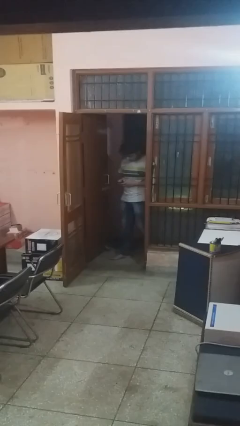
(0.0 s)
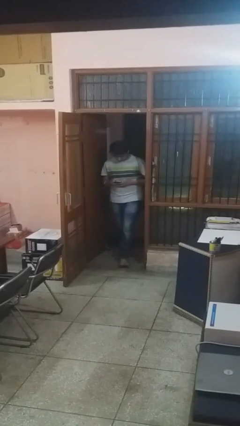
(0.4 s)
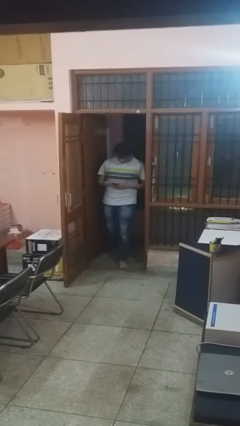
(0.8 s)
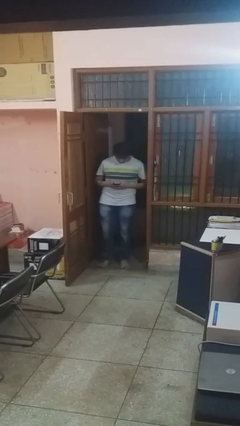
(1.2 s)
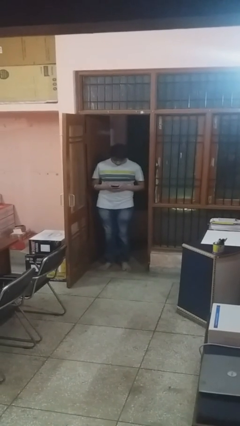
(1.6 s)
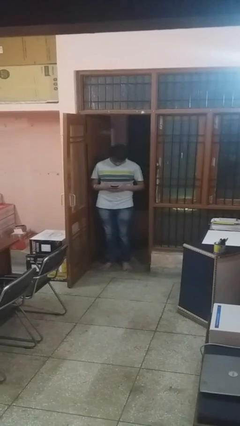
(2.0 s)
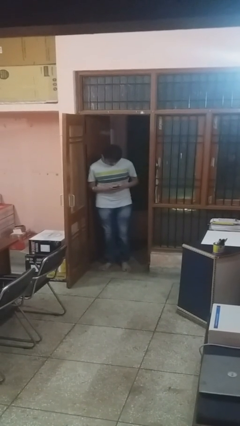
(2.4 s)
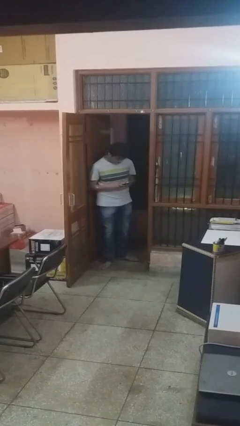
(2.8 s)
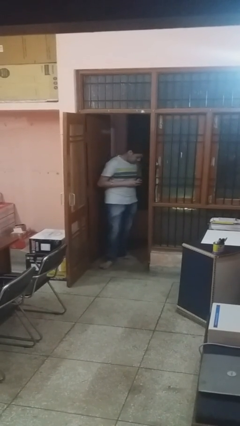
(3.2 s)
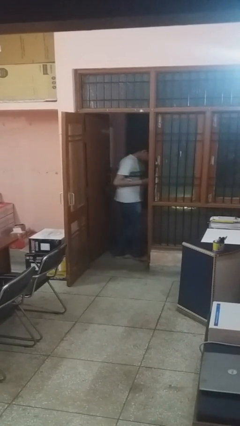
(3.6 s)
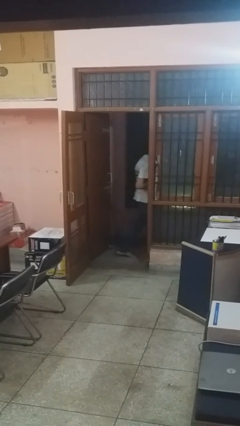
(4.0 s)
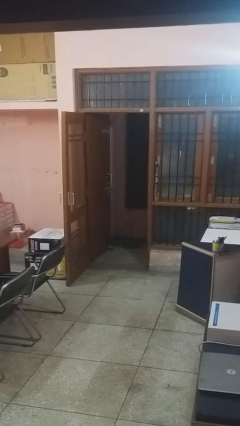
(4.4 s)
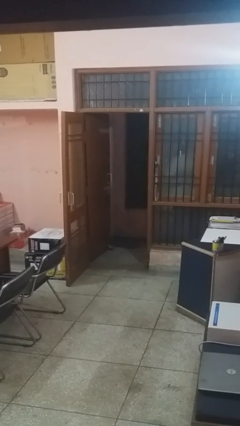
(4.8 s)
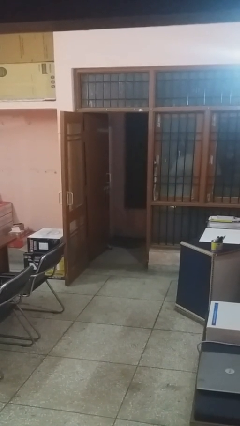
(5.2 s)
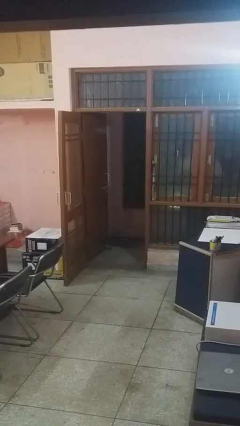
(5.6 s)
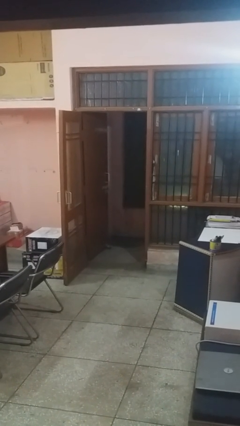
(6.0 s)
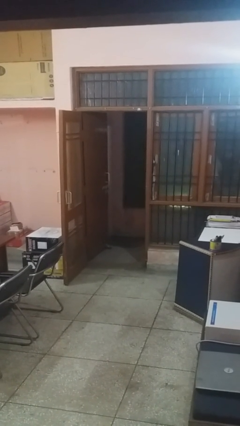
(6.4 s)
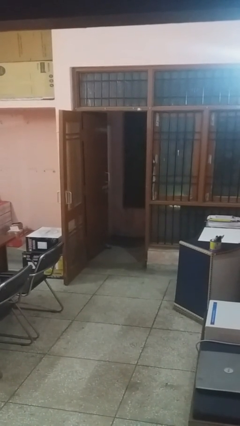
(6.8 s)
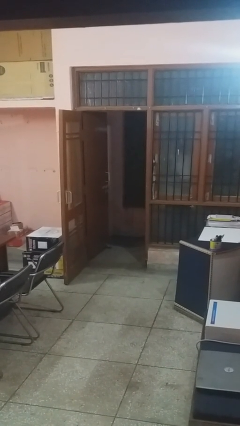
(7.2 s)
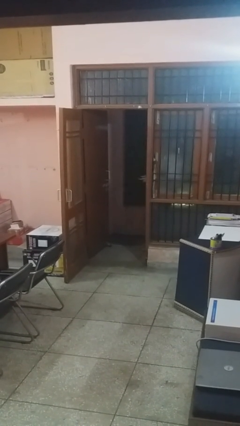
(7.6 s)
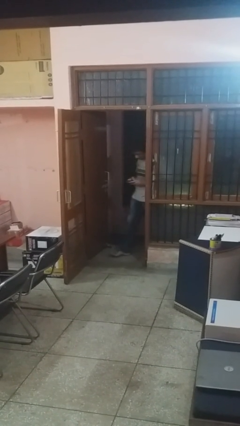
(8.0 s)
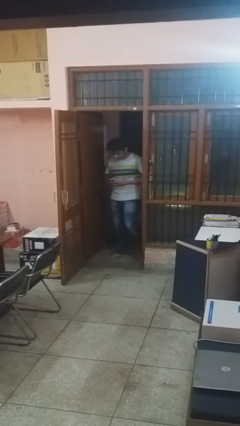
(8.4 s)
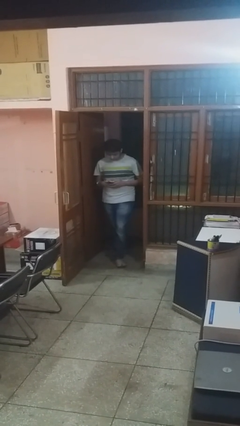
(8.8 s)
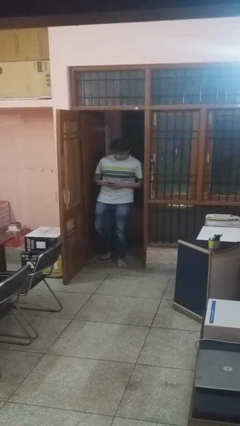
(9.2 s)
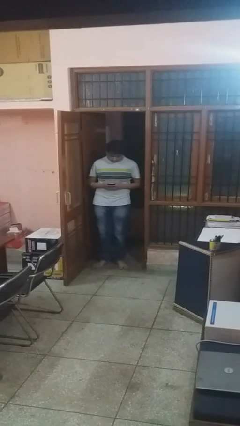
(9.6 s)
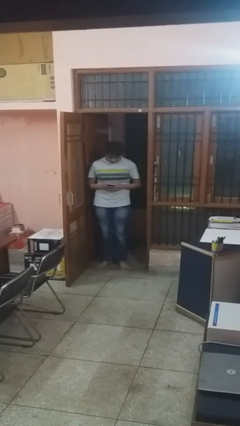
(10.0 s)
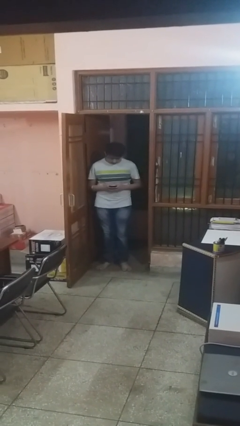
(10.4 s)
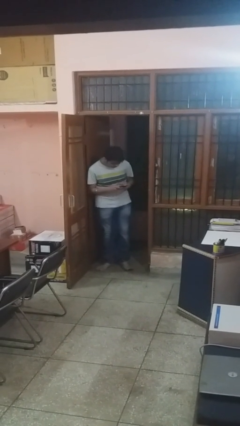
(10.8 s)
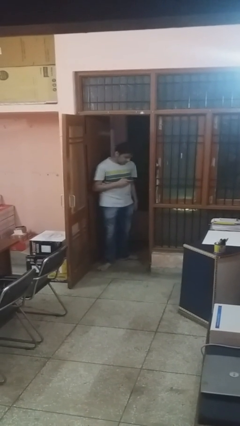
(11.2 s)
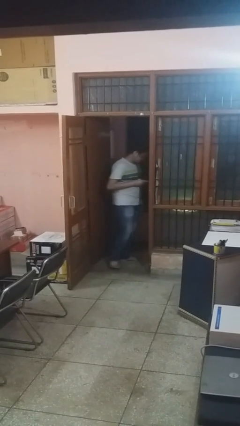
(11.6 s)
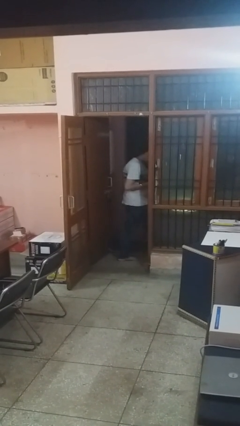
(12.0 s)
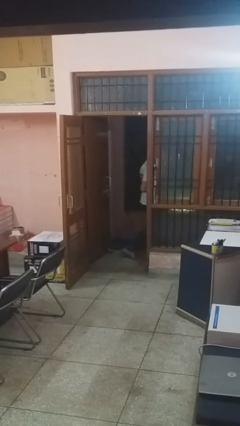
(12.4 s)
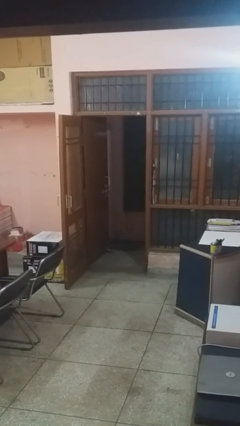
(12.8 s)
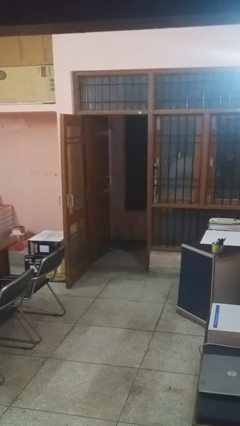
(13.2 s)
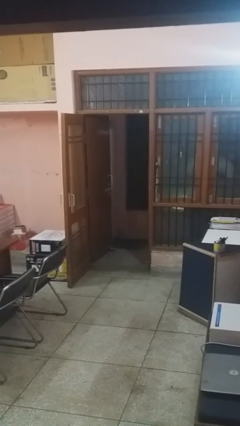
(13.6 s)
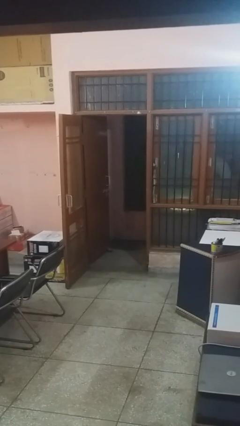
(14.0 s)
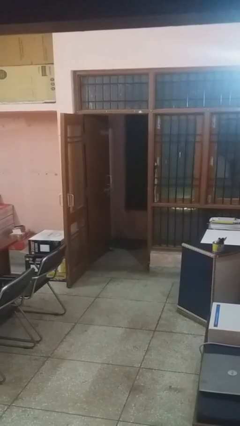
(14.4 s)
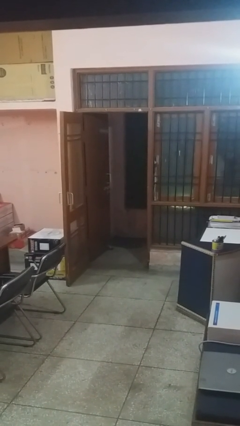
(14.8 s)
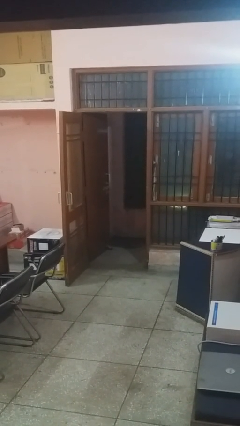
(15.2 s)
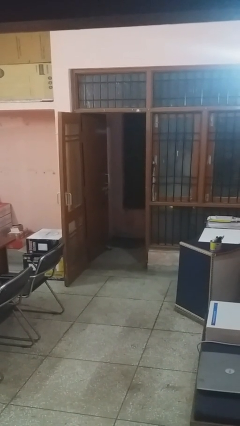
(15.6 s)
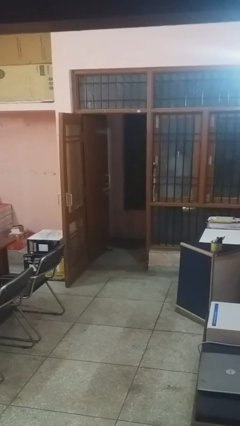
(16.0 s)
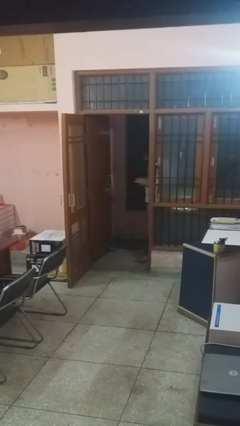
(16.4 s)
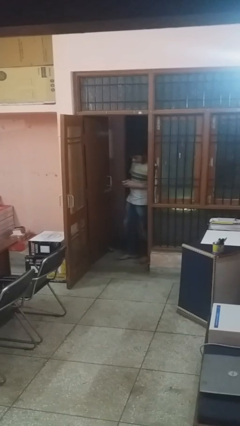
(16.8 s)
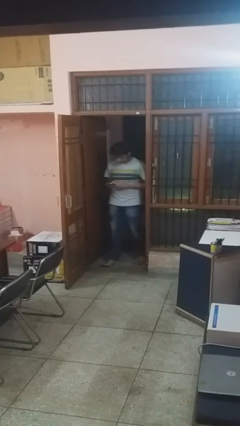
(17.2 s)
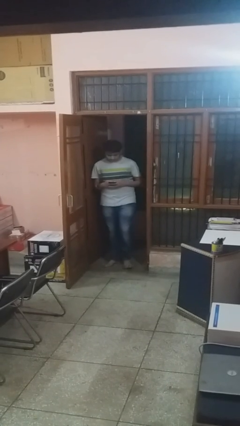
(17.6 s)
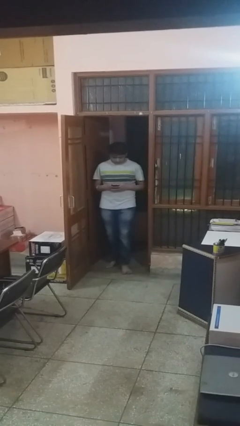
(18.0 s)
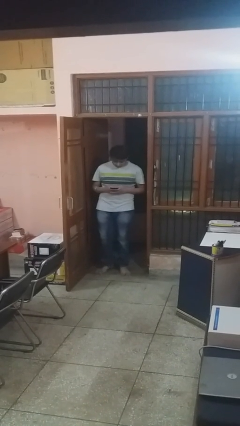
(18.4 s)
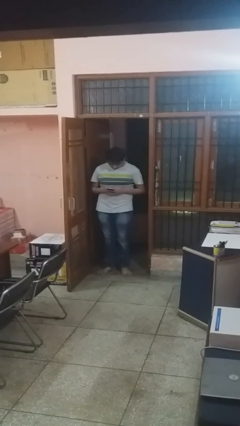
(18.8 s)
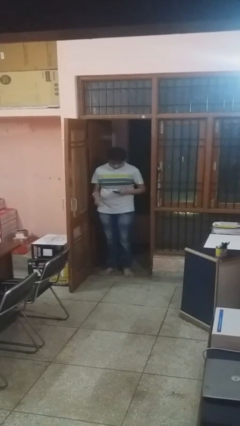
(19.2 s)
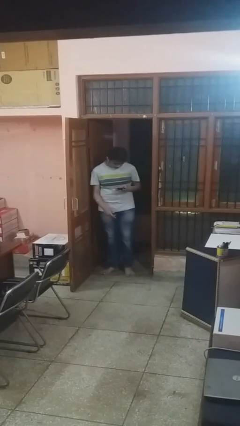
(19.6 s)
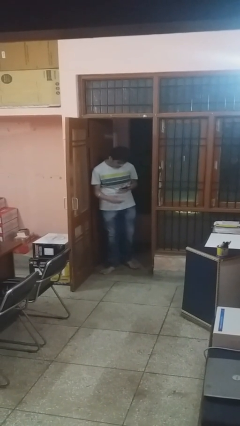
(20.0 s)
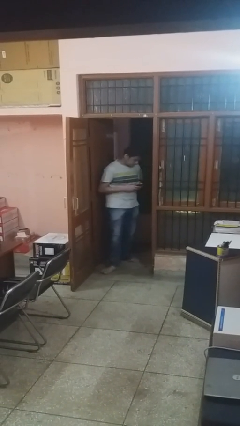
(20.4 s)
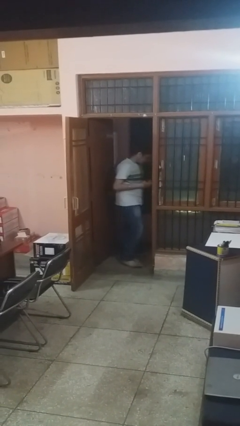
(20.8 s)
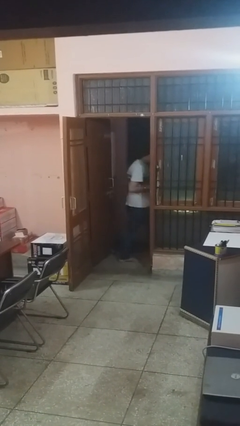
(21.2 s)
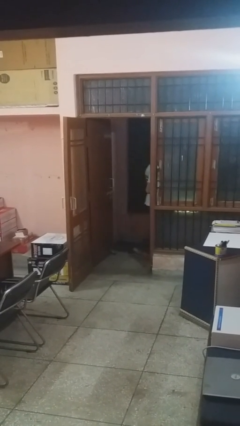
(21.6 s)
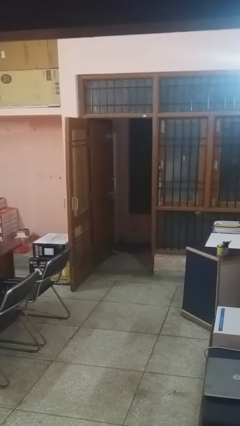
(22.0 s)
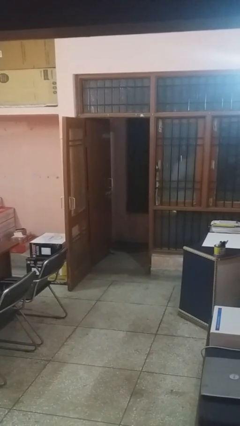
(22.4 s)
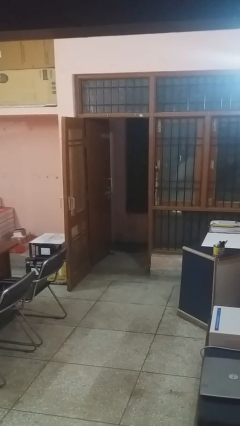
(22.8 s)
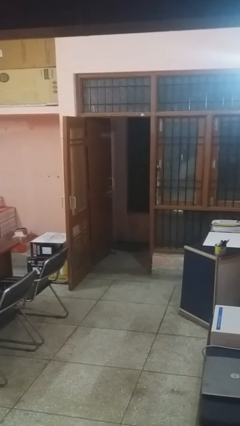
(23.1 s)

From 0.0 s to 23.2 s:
person texts on phone

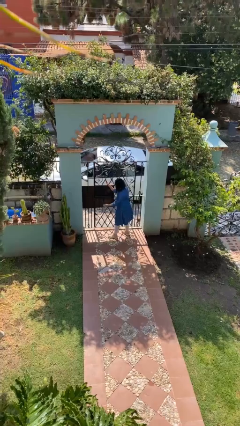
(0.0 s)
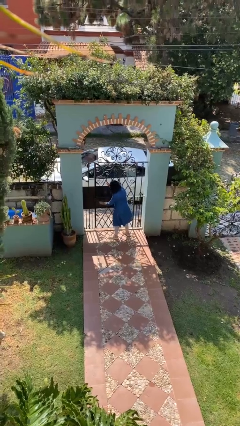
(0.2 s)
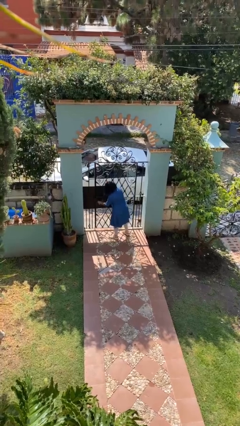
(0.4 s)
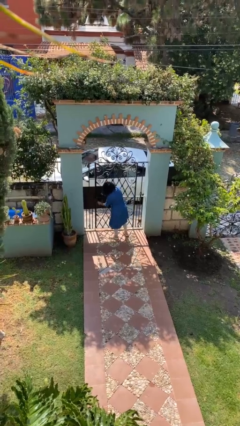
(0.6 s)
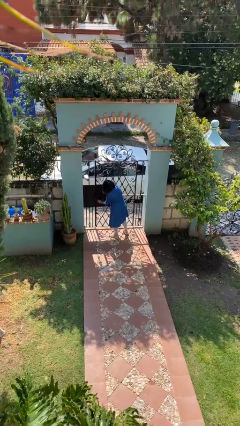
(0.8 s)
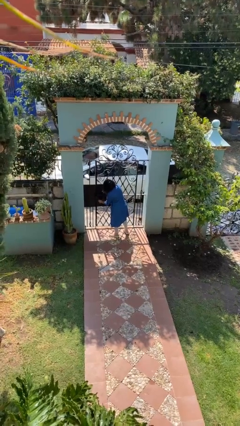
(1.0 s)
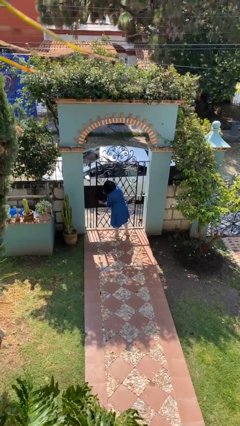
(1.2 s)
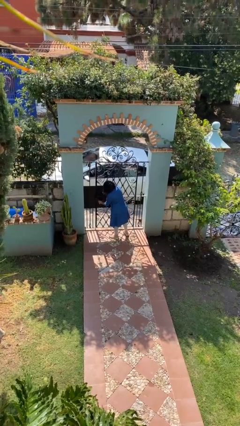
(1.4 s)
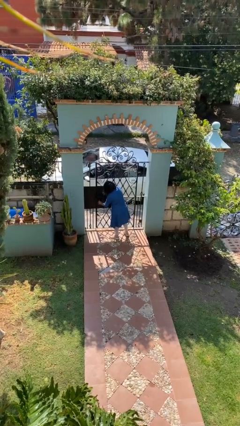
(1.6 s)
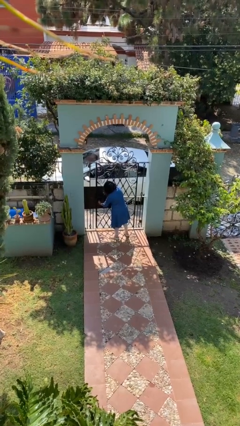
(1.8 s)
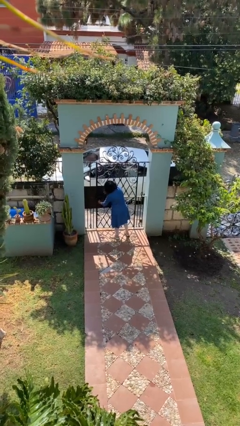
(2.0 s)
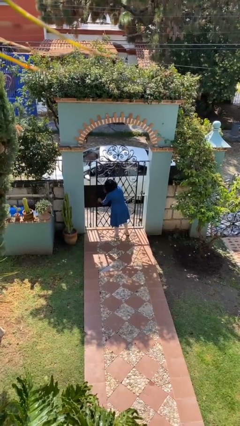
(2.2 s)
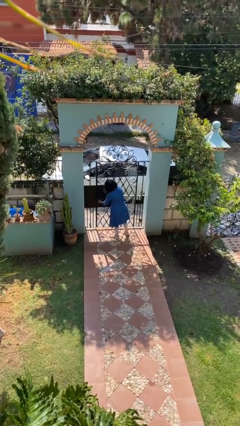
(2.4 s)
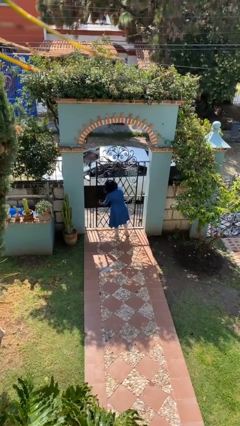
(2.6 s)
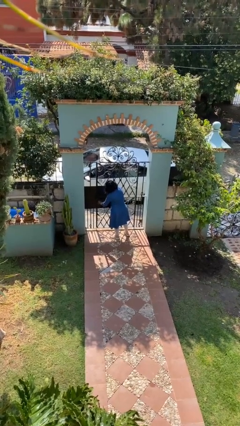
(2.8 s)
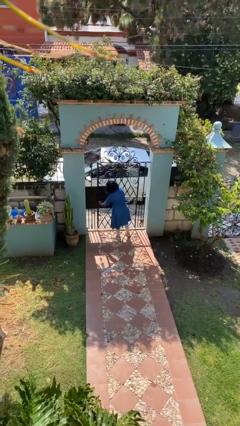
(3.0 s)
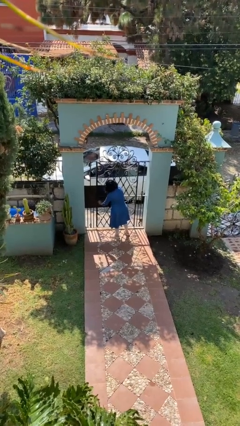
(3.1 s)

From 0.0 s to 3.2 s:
person unlocks door with keys

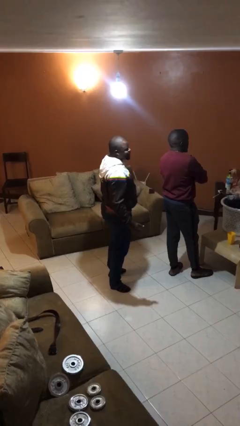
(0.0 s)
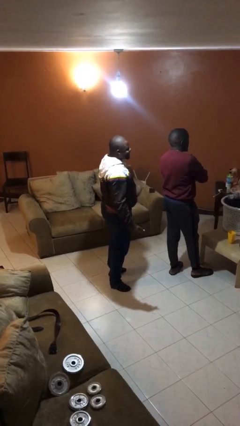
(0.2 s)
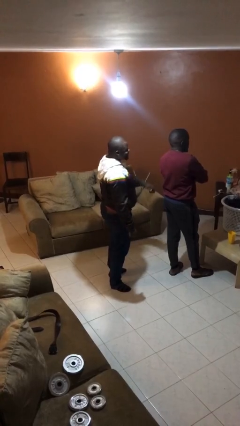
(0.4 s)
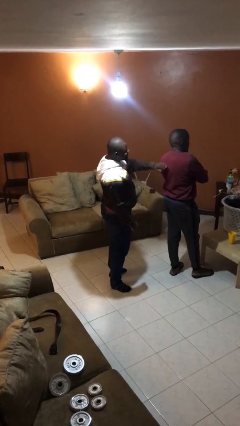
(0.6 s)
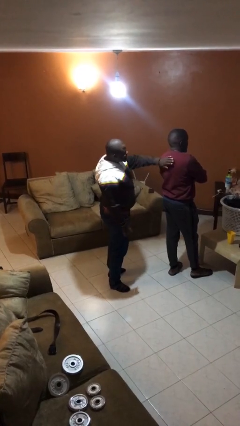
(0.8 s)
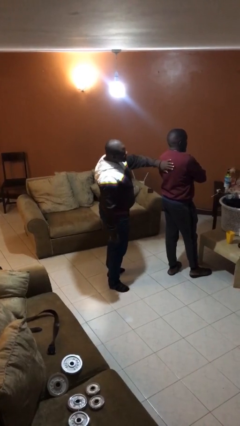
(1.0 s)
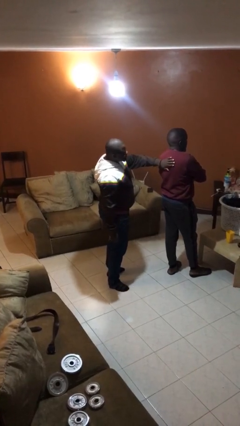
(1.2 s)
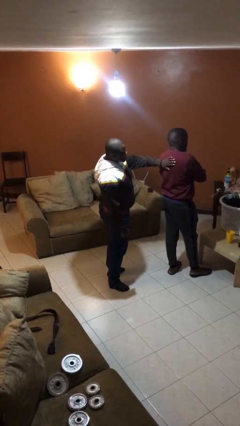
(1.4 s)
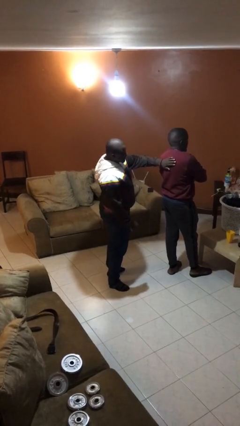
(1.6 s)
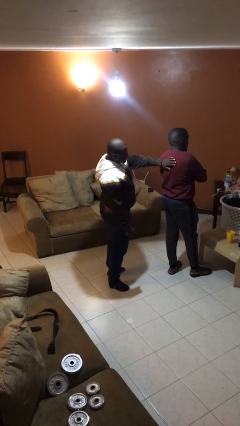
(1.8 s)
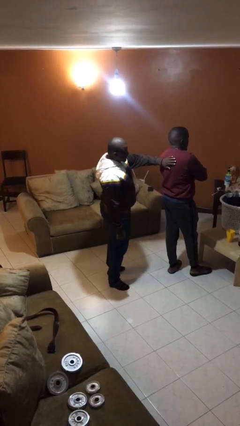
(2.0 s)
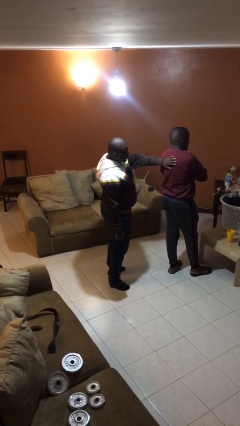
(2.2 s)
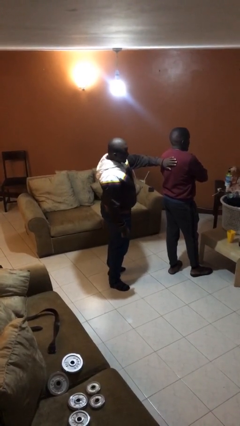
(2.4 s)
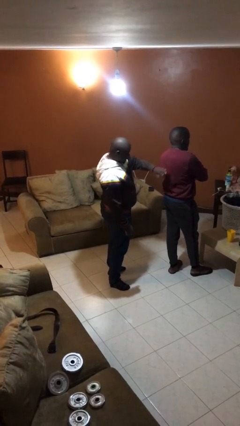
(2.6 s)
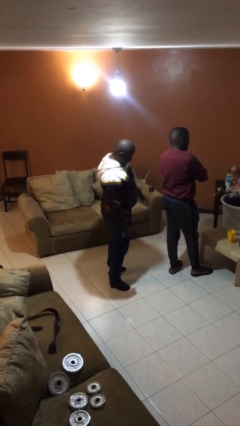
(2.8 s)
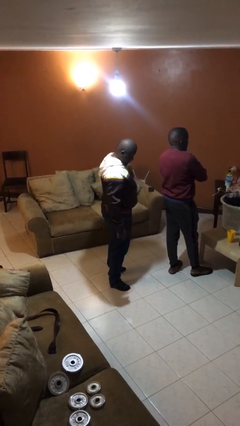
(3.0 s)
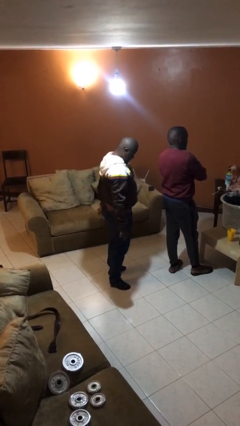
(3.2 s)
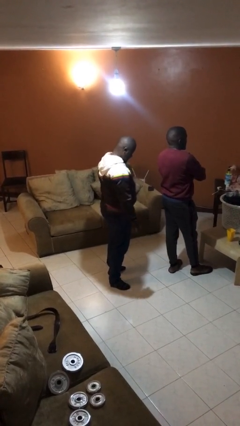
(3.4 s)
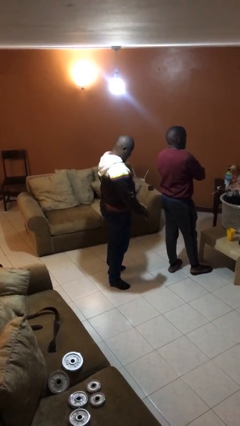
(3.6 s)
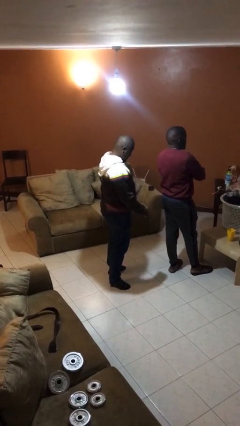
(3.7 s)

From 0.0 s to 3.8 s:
person touches back of person
